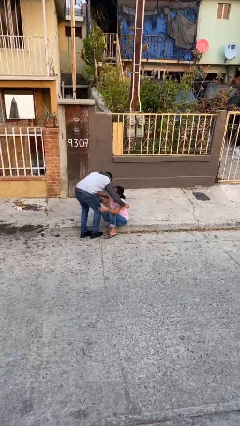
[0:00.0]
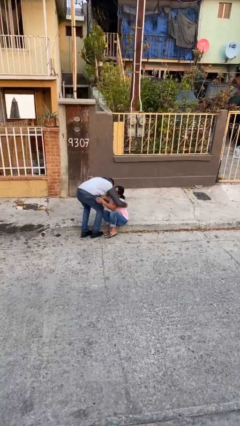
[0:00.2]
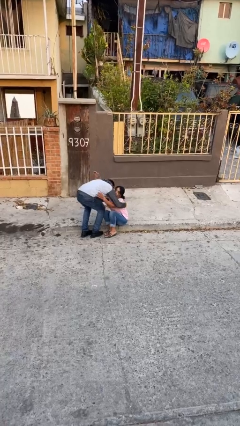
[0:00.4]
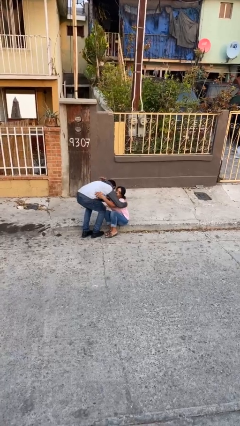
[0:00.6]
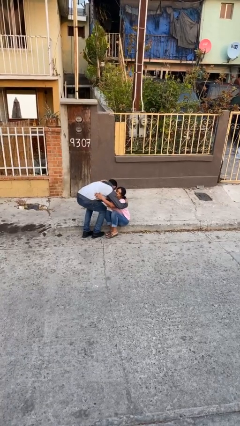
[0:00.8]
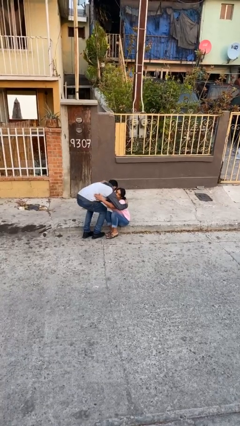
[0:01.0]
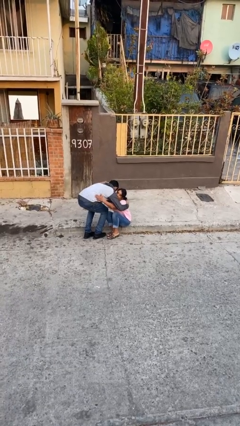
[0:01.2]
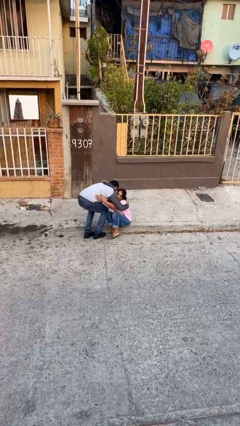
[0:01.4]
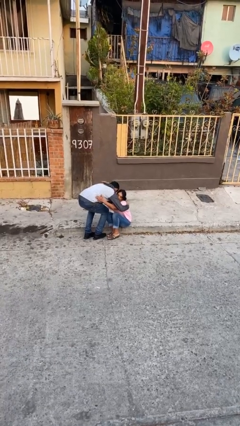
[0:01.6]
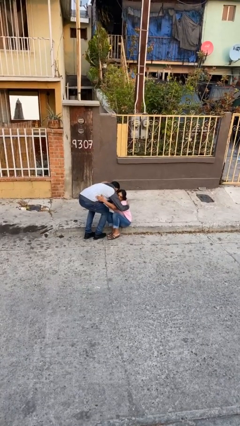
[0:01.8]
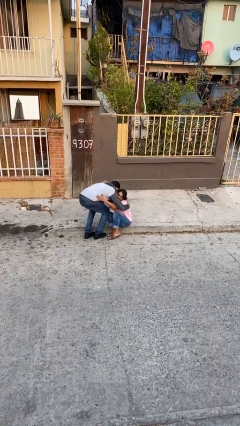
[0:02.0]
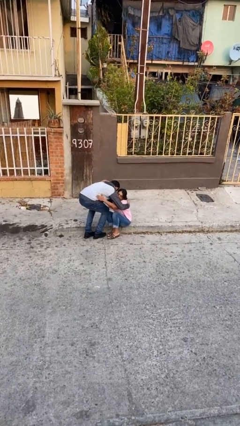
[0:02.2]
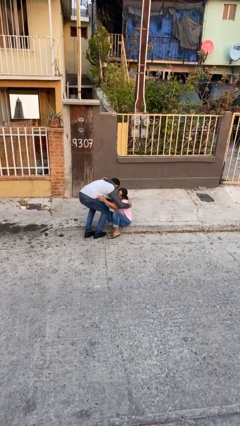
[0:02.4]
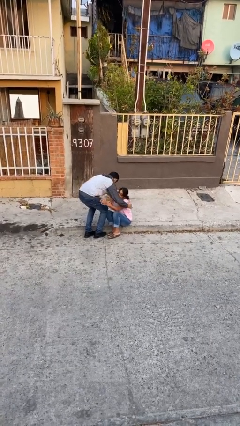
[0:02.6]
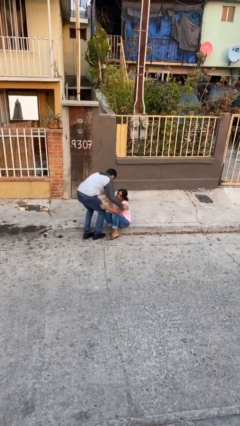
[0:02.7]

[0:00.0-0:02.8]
person embraces person

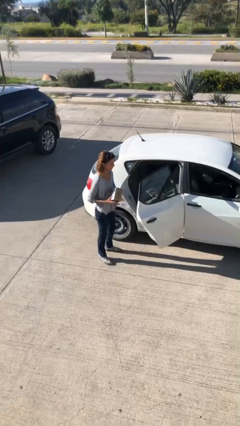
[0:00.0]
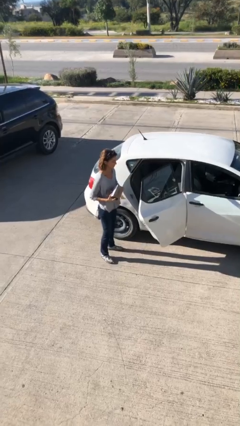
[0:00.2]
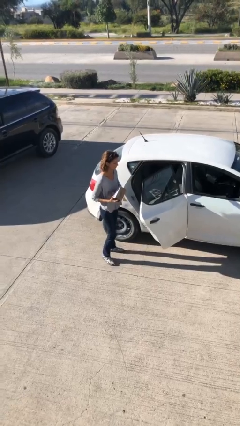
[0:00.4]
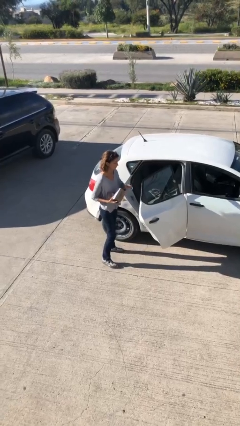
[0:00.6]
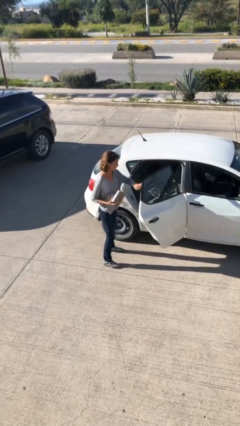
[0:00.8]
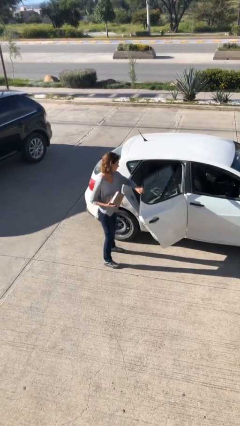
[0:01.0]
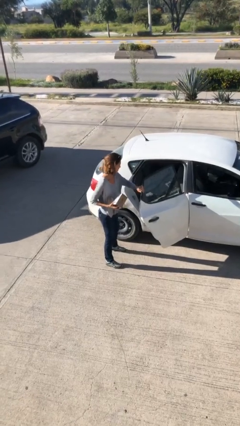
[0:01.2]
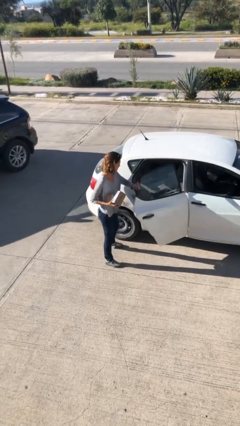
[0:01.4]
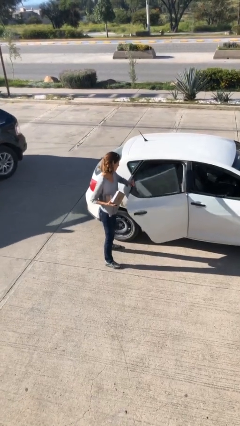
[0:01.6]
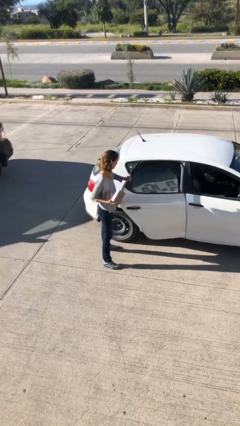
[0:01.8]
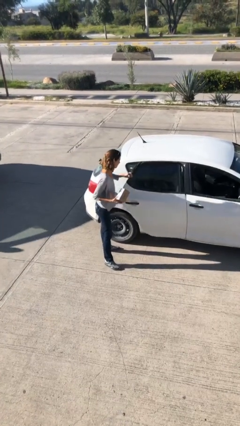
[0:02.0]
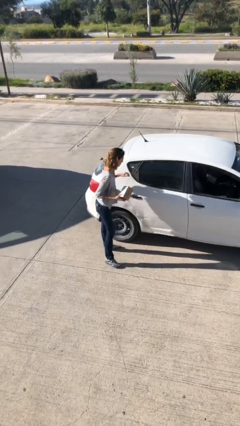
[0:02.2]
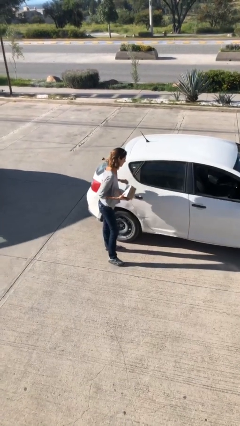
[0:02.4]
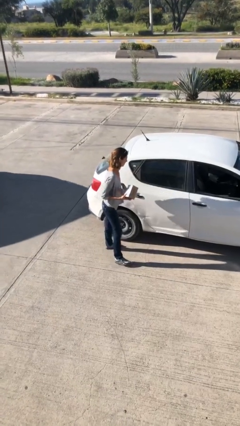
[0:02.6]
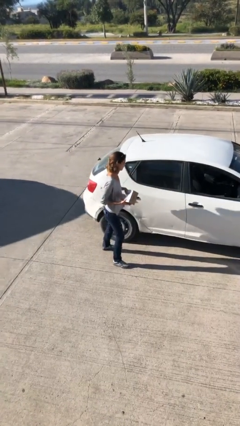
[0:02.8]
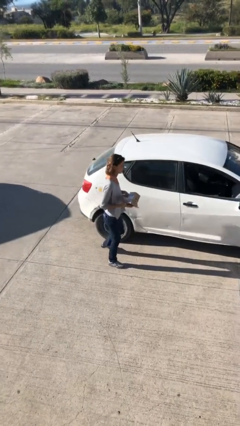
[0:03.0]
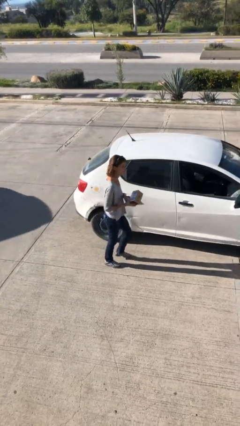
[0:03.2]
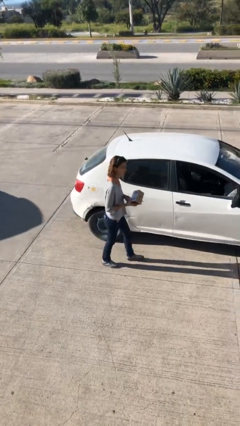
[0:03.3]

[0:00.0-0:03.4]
person closes car door

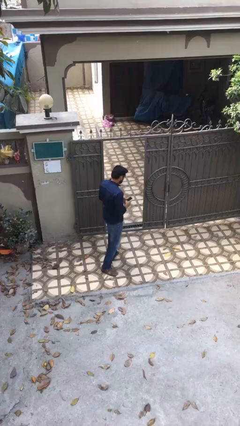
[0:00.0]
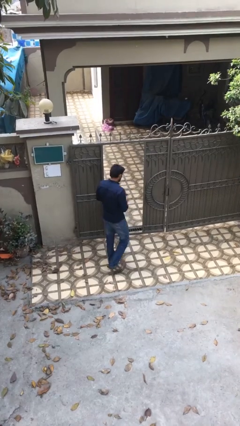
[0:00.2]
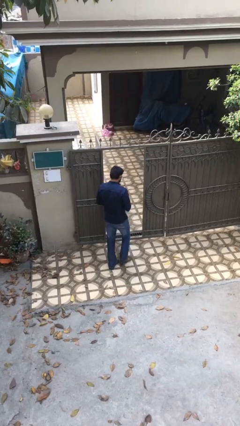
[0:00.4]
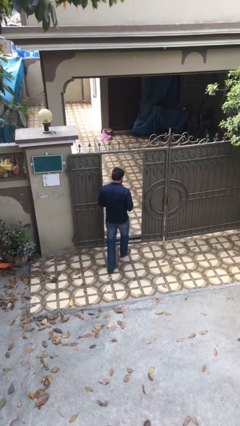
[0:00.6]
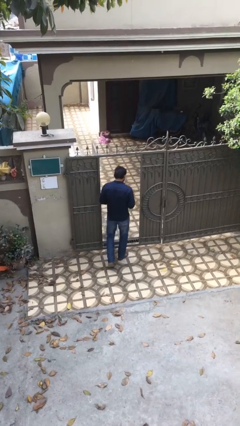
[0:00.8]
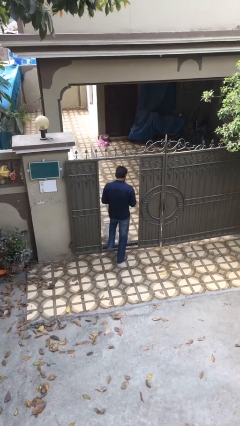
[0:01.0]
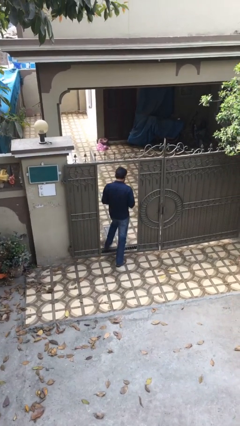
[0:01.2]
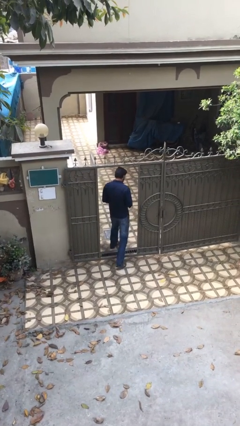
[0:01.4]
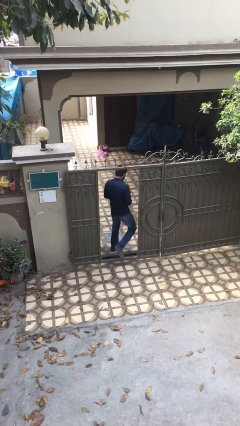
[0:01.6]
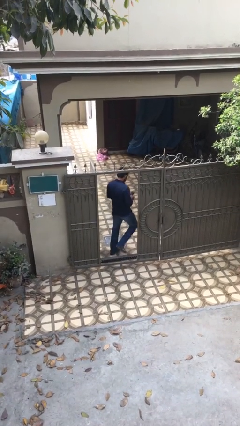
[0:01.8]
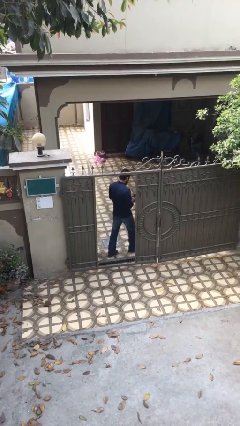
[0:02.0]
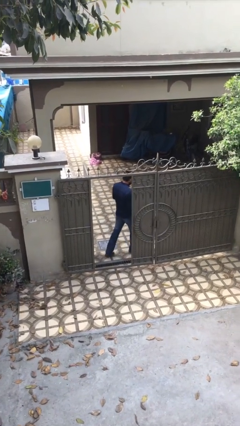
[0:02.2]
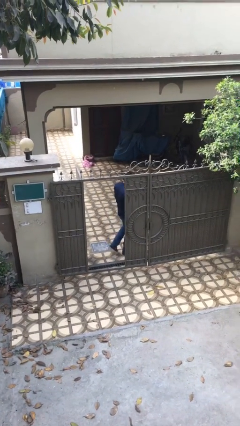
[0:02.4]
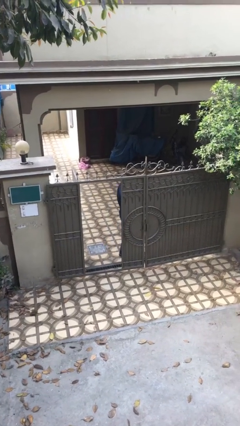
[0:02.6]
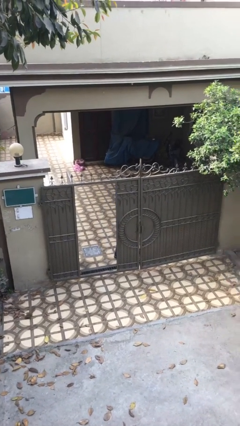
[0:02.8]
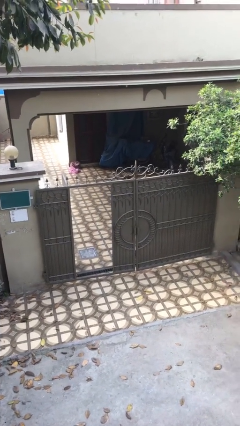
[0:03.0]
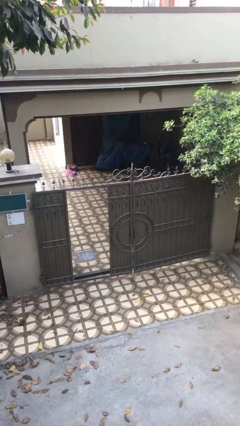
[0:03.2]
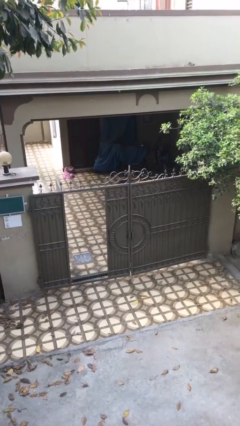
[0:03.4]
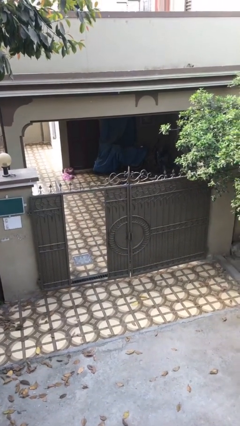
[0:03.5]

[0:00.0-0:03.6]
person exits scene through structure

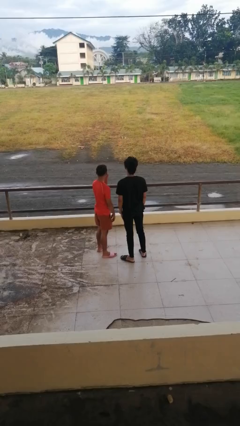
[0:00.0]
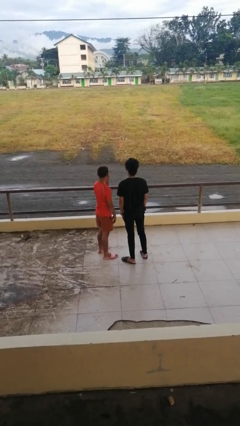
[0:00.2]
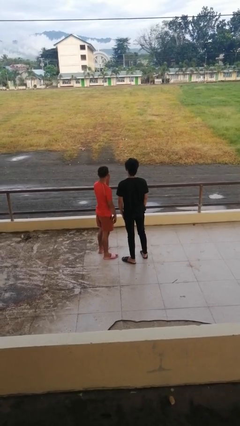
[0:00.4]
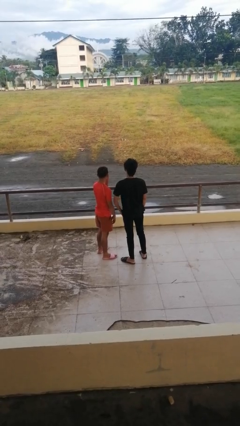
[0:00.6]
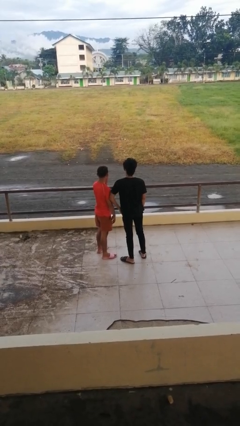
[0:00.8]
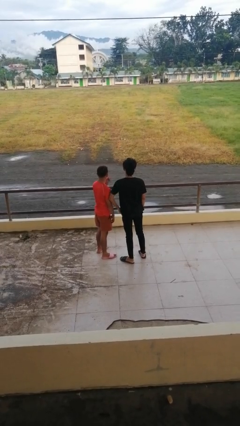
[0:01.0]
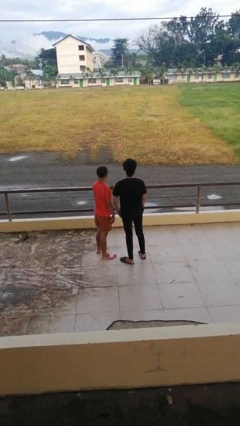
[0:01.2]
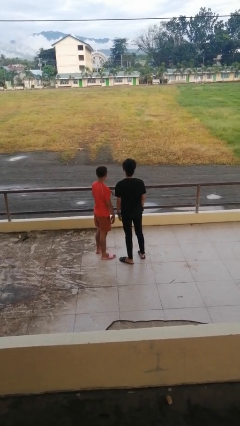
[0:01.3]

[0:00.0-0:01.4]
person nudges person with elbow

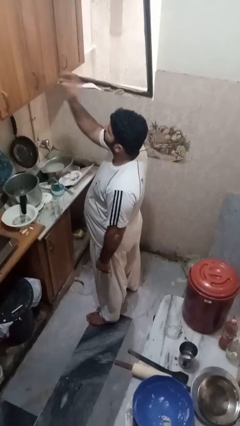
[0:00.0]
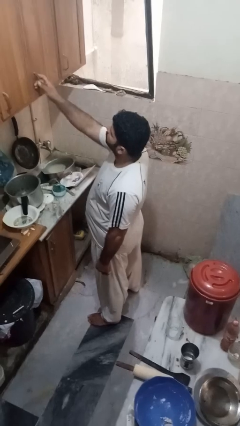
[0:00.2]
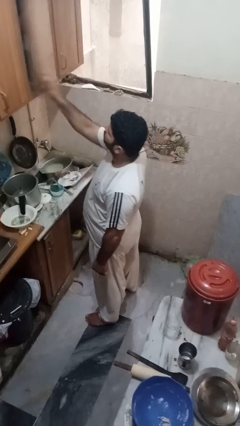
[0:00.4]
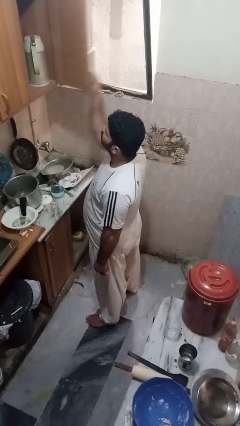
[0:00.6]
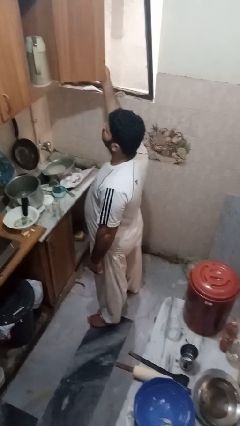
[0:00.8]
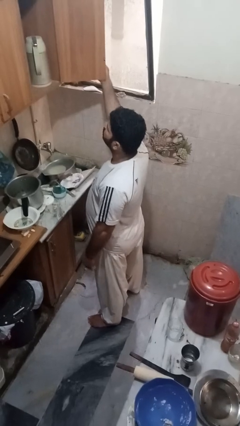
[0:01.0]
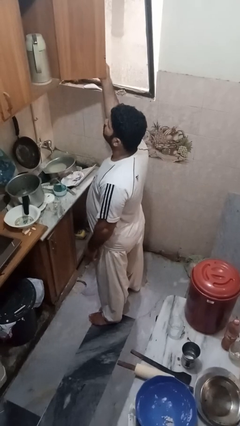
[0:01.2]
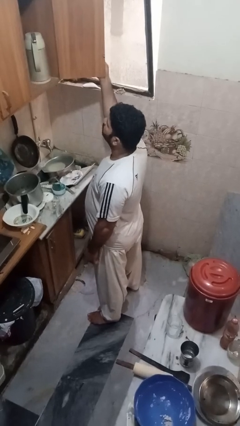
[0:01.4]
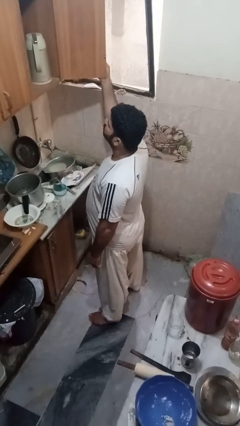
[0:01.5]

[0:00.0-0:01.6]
person opens cabinet

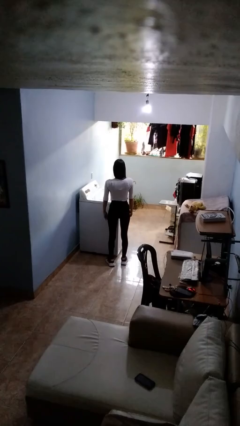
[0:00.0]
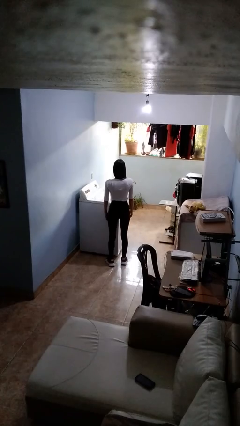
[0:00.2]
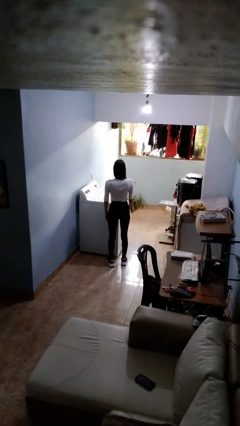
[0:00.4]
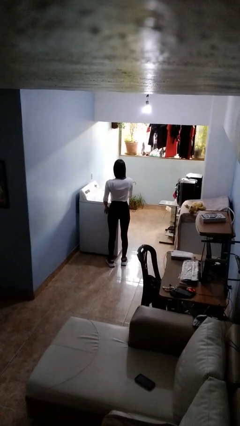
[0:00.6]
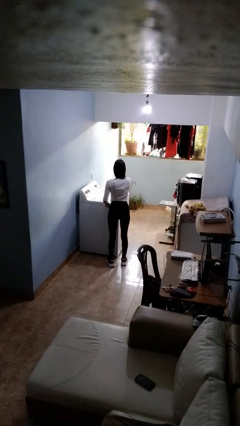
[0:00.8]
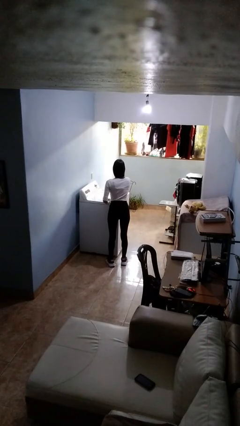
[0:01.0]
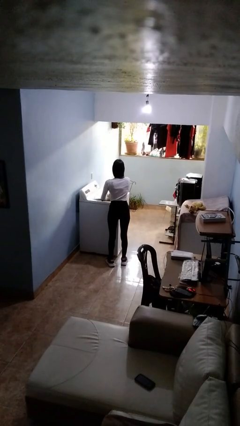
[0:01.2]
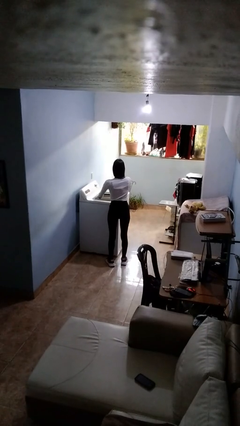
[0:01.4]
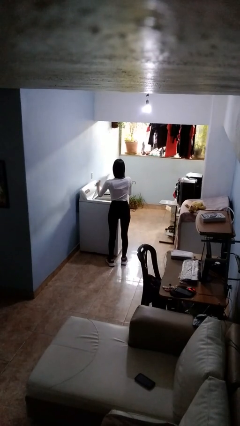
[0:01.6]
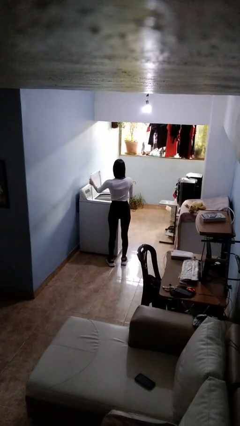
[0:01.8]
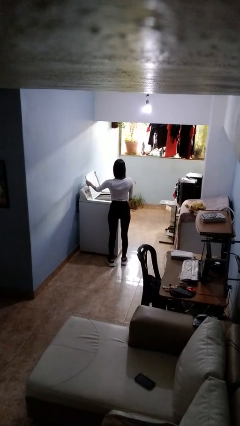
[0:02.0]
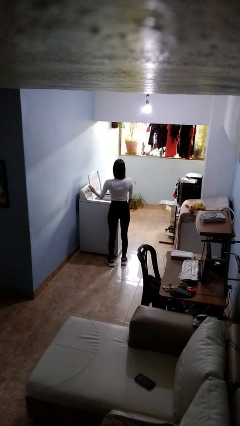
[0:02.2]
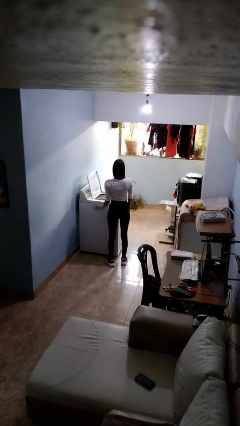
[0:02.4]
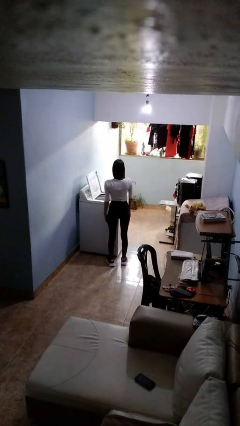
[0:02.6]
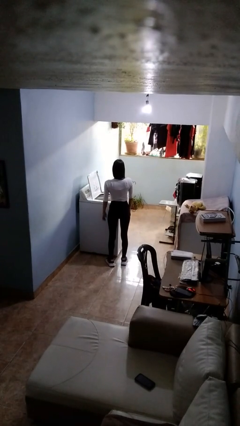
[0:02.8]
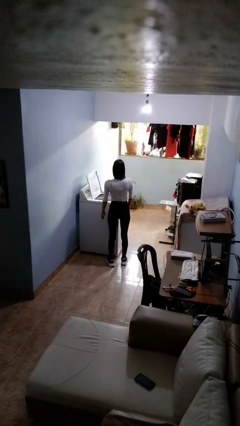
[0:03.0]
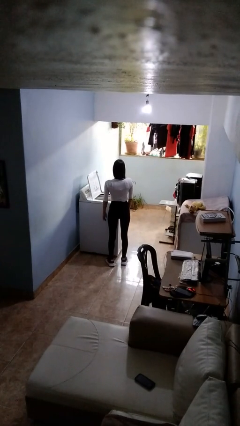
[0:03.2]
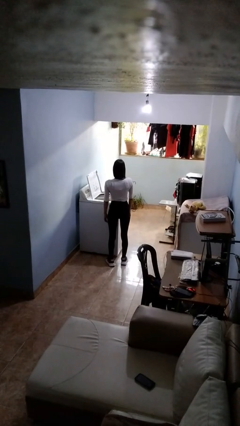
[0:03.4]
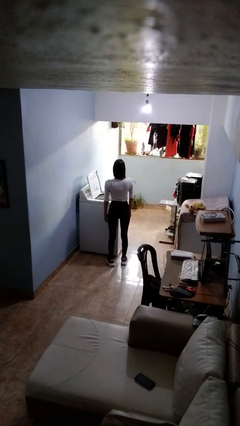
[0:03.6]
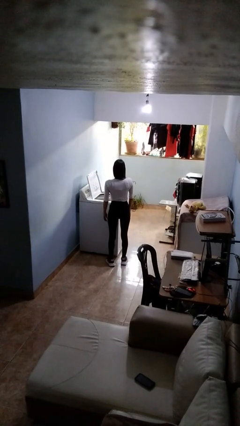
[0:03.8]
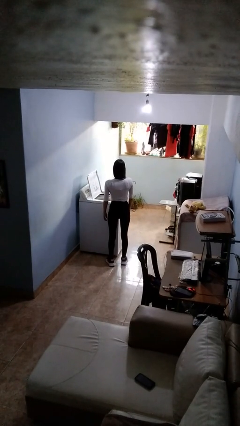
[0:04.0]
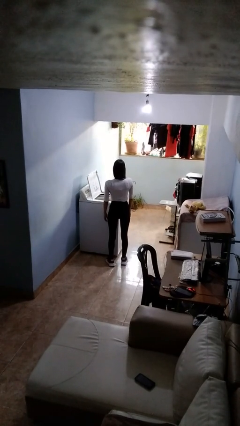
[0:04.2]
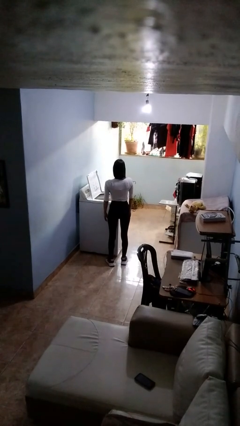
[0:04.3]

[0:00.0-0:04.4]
person opens clothes washer

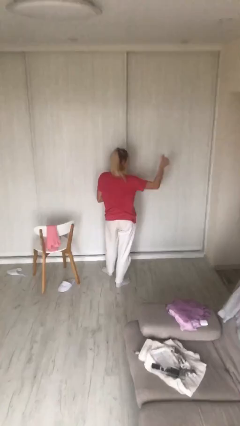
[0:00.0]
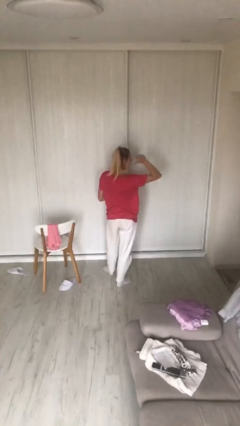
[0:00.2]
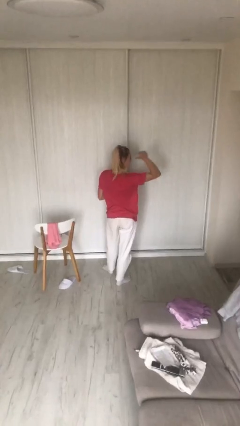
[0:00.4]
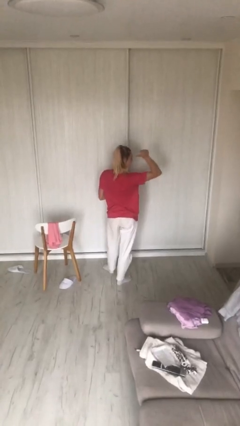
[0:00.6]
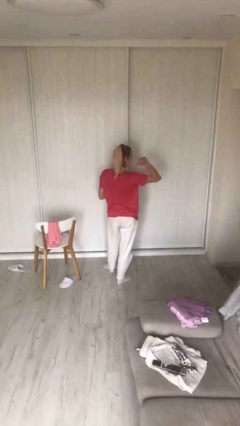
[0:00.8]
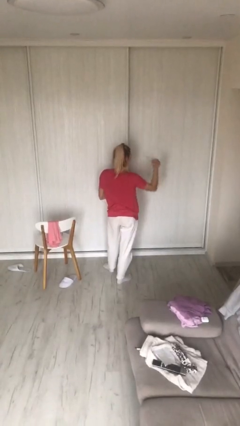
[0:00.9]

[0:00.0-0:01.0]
person gestures behind me
